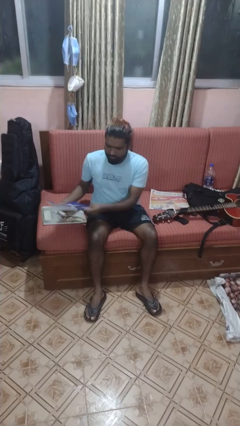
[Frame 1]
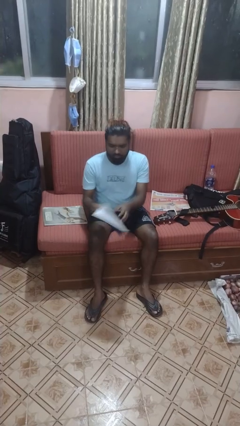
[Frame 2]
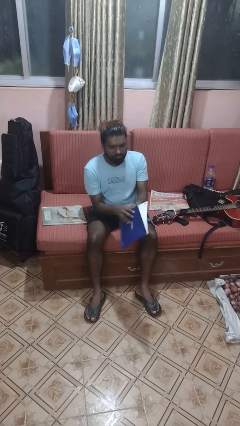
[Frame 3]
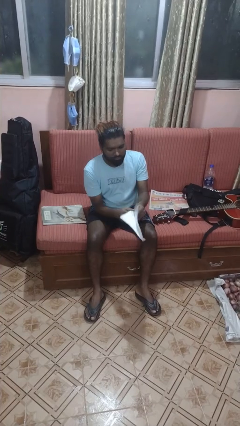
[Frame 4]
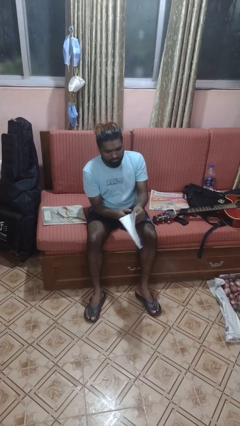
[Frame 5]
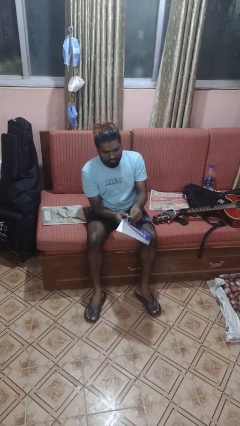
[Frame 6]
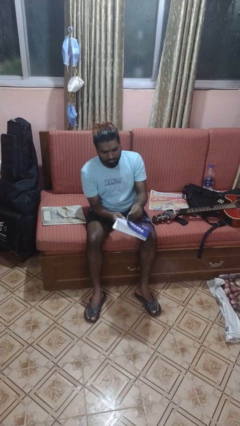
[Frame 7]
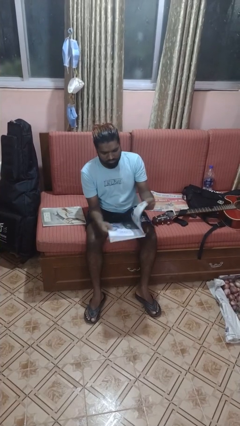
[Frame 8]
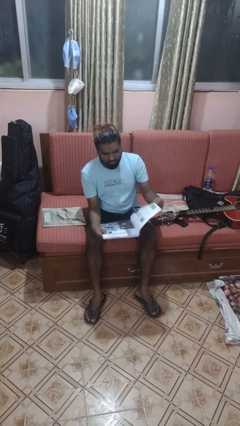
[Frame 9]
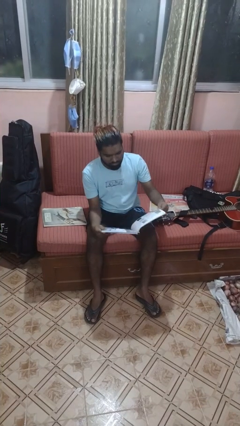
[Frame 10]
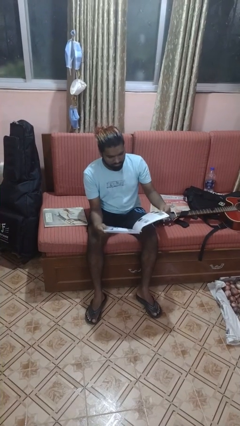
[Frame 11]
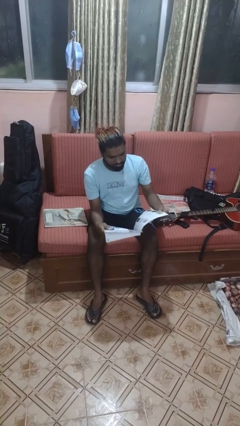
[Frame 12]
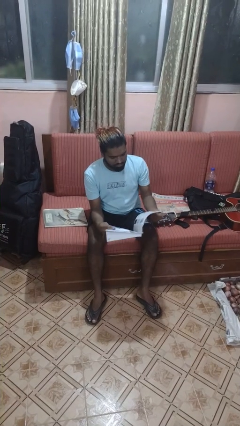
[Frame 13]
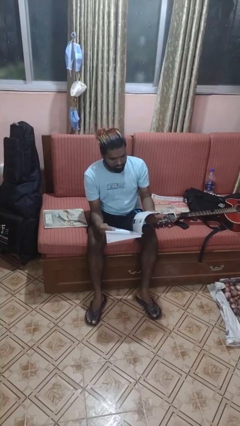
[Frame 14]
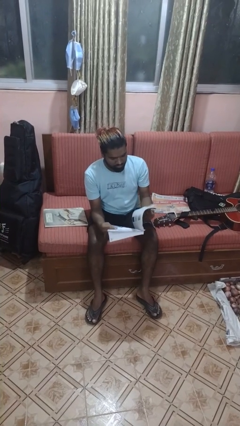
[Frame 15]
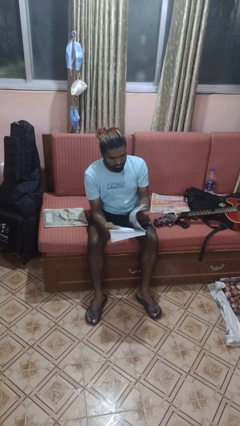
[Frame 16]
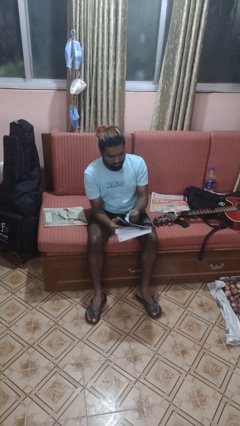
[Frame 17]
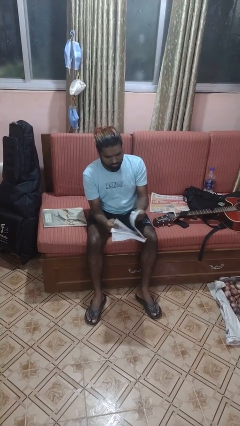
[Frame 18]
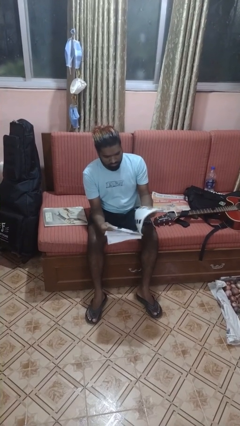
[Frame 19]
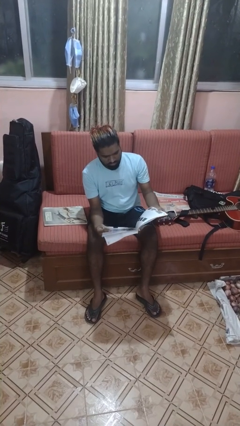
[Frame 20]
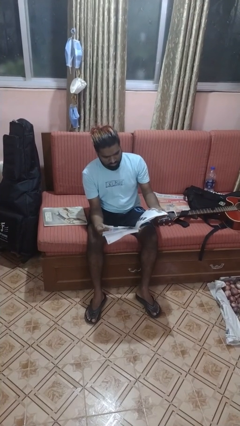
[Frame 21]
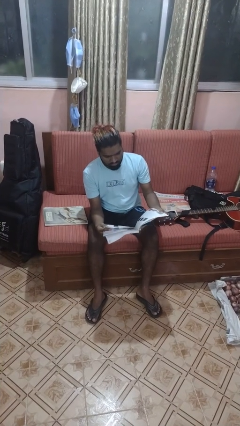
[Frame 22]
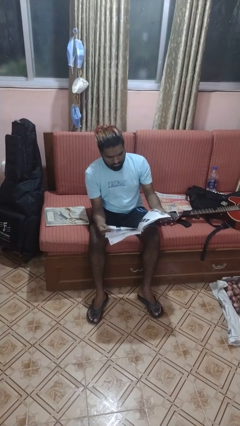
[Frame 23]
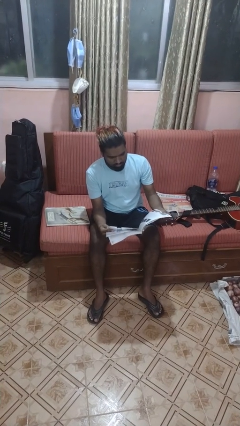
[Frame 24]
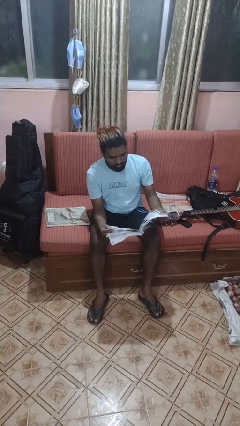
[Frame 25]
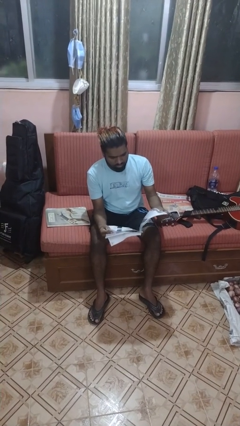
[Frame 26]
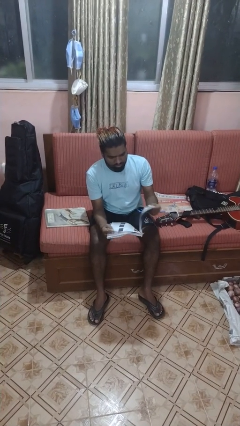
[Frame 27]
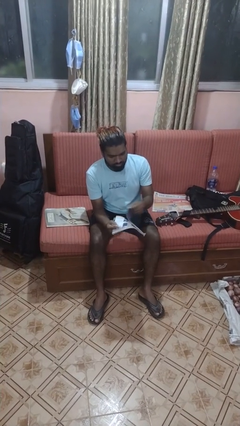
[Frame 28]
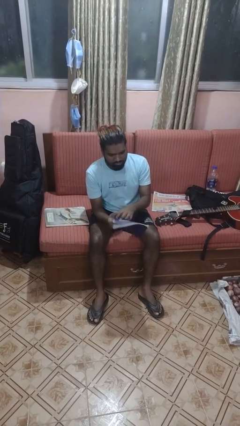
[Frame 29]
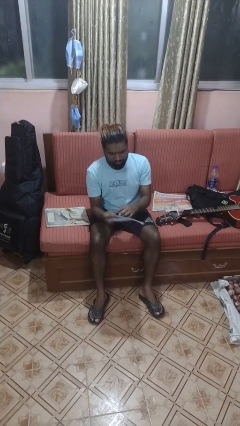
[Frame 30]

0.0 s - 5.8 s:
person reads magazine

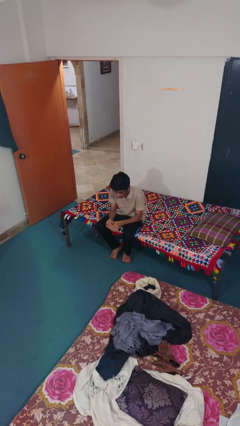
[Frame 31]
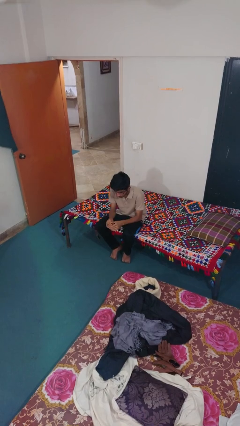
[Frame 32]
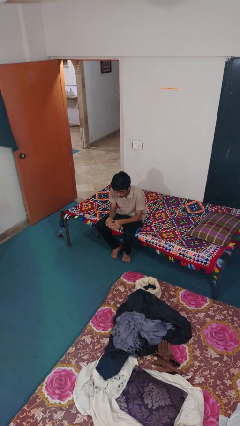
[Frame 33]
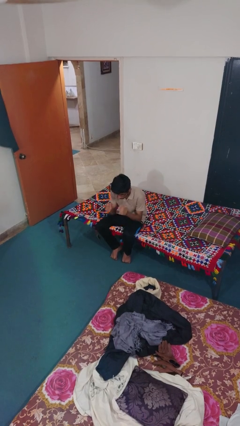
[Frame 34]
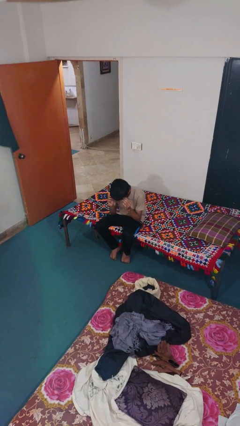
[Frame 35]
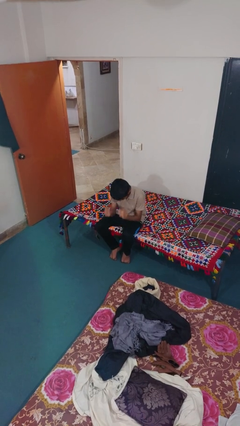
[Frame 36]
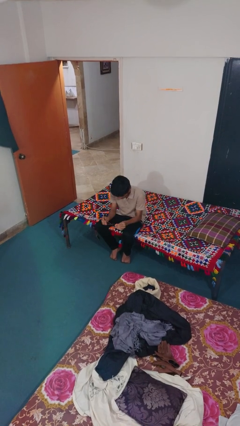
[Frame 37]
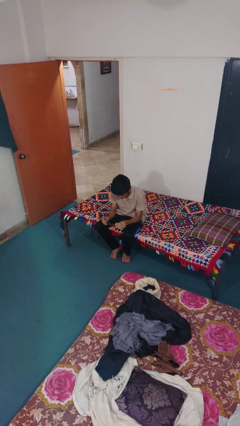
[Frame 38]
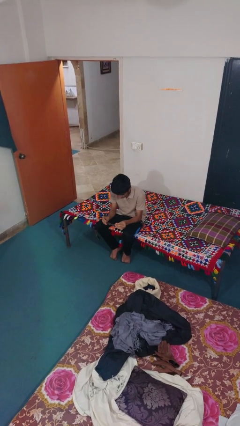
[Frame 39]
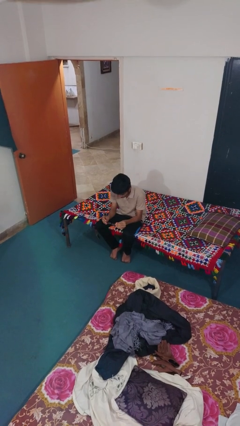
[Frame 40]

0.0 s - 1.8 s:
person takes off glasses

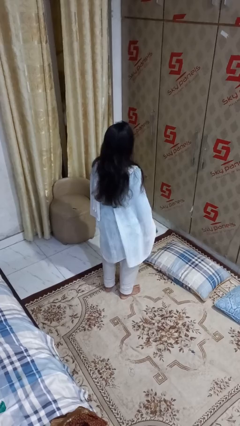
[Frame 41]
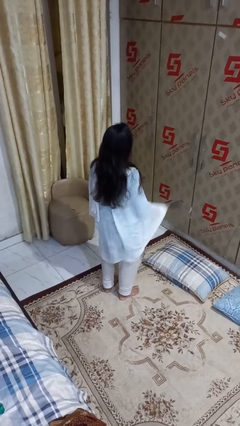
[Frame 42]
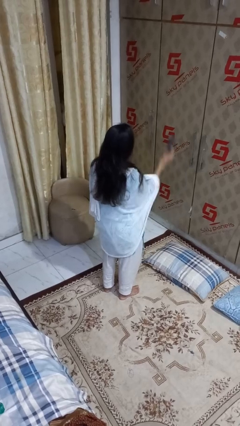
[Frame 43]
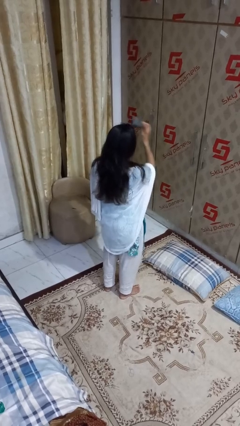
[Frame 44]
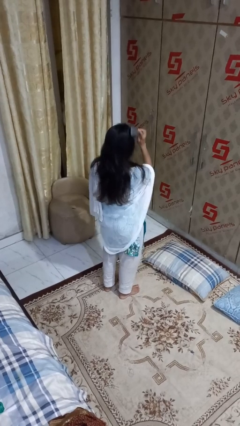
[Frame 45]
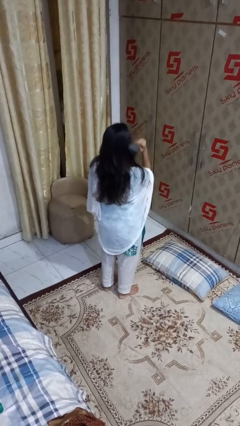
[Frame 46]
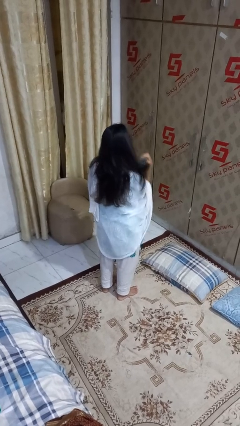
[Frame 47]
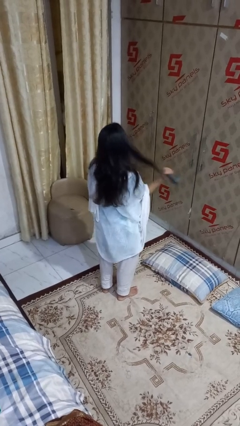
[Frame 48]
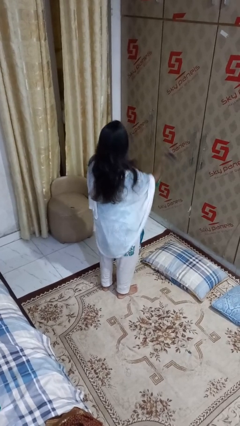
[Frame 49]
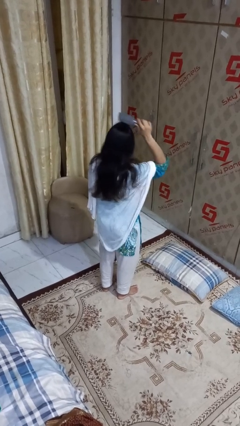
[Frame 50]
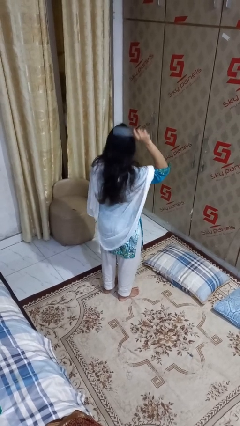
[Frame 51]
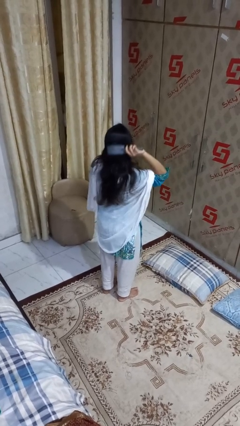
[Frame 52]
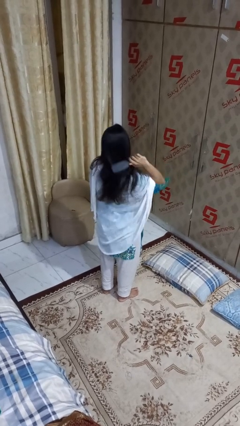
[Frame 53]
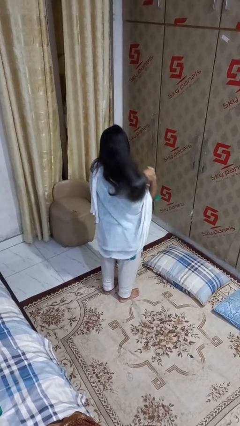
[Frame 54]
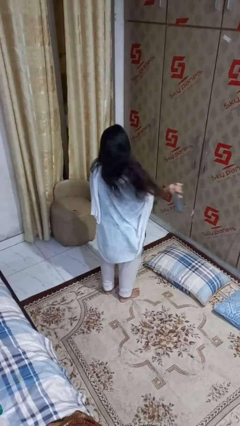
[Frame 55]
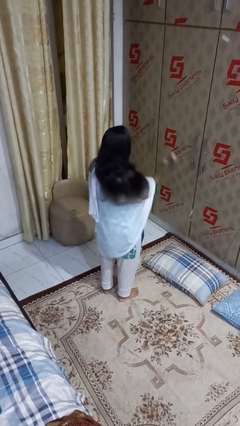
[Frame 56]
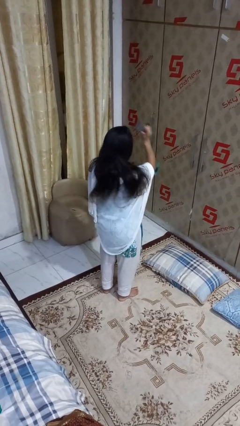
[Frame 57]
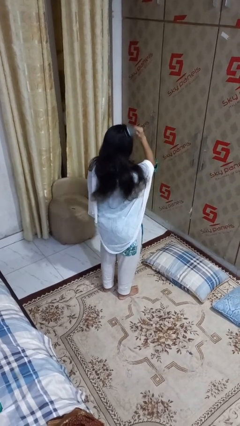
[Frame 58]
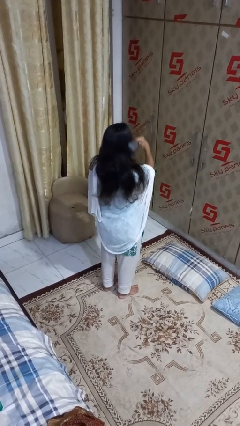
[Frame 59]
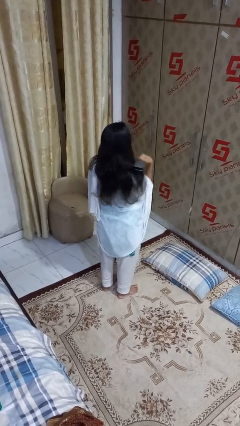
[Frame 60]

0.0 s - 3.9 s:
person brushes hair

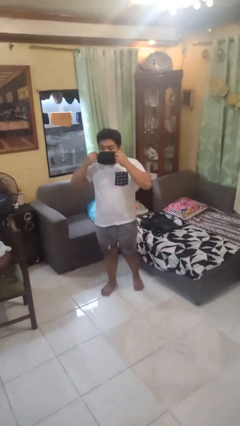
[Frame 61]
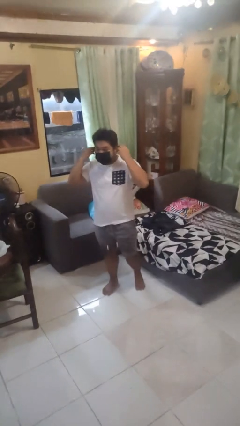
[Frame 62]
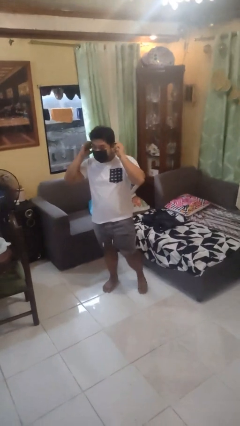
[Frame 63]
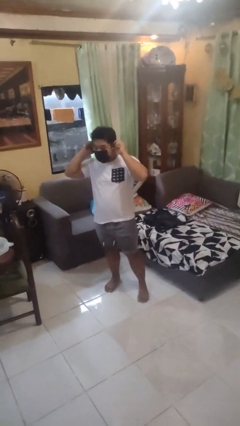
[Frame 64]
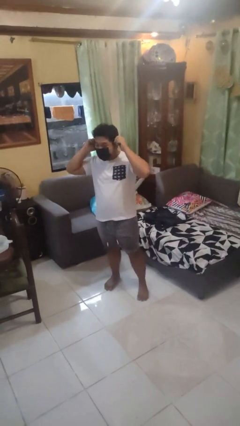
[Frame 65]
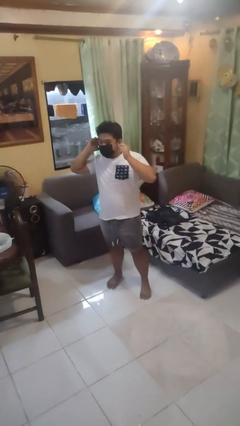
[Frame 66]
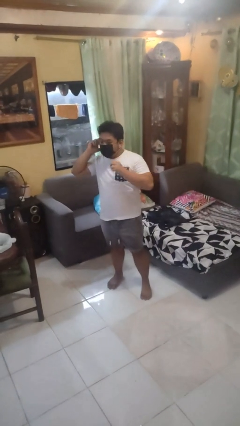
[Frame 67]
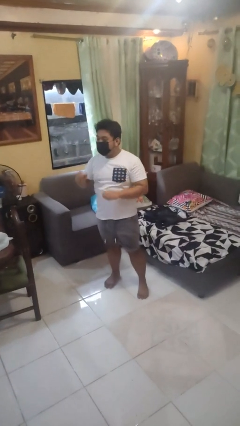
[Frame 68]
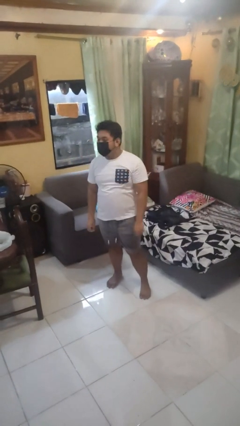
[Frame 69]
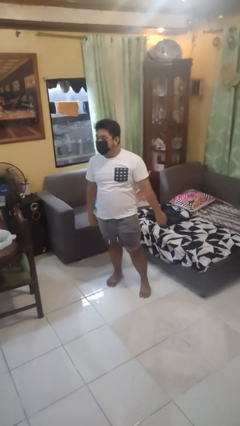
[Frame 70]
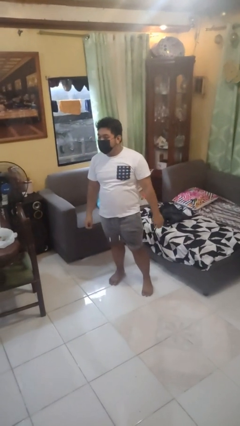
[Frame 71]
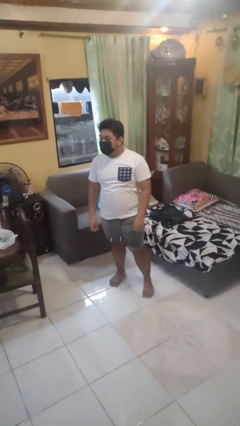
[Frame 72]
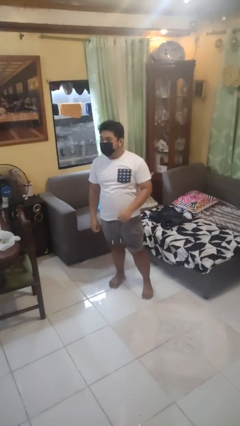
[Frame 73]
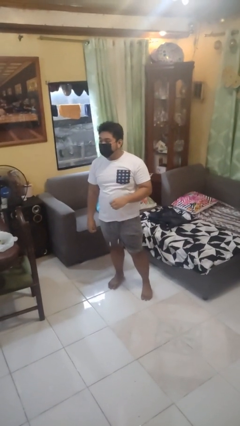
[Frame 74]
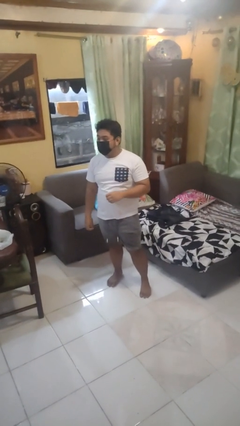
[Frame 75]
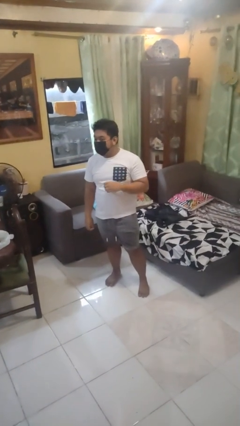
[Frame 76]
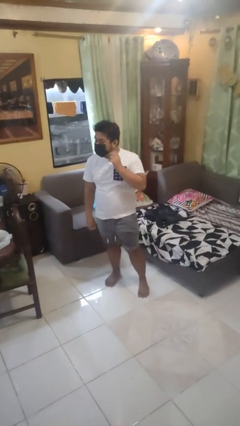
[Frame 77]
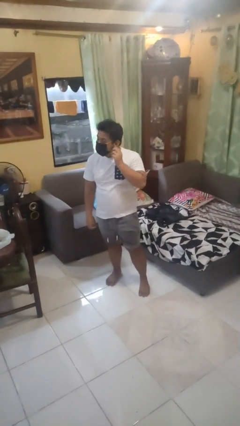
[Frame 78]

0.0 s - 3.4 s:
person puts on facemask

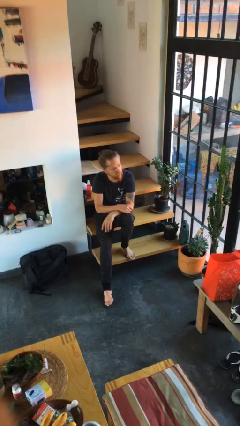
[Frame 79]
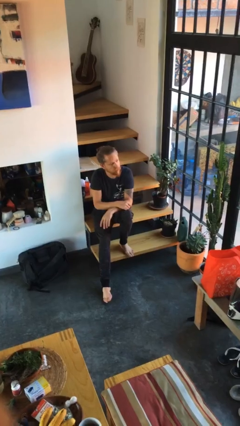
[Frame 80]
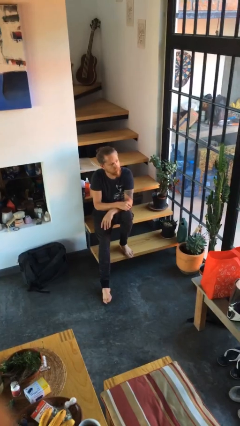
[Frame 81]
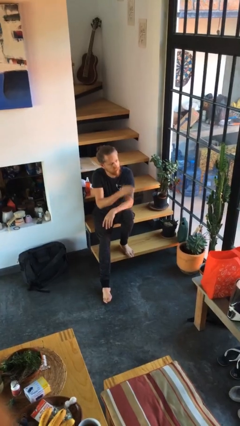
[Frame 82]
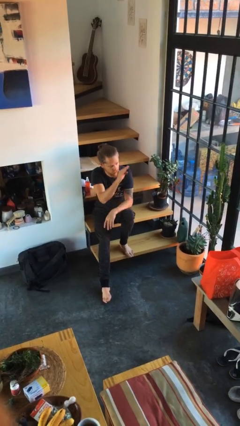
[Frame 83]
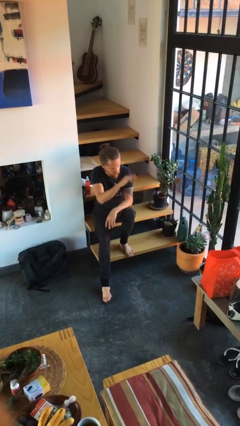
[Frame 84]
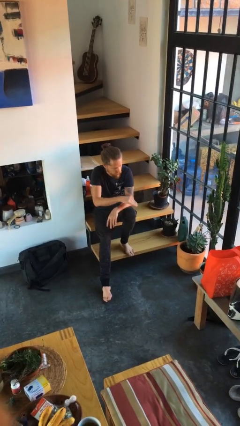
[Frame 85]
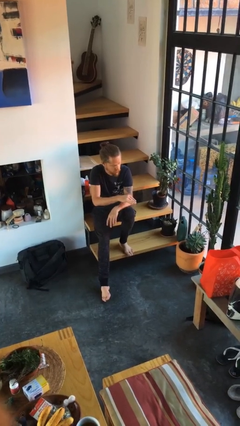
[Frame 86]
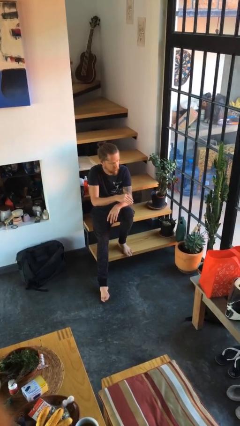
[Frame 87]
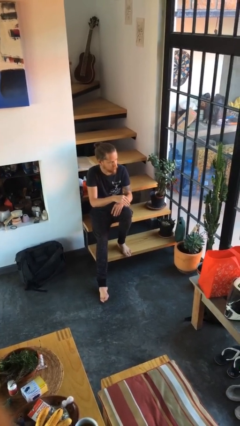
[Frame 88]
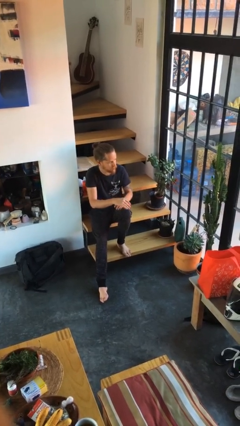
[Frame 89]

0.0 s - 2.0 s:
person gestures swipe down

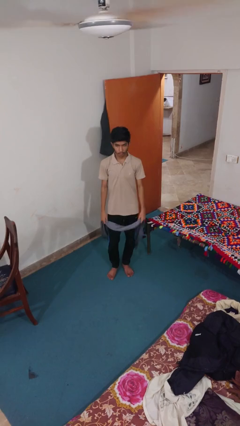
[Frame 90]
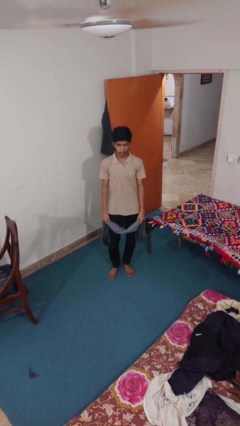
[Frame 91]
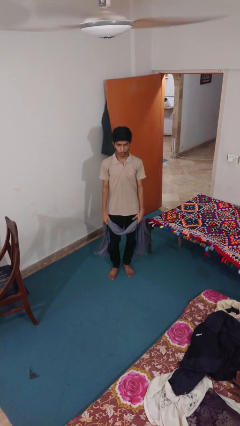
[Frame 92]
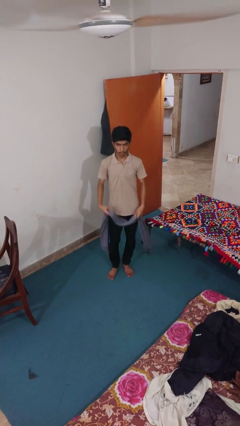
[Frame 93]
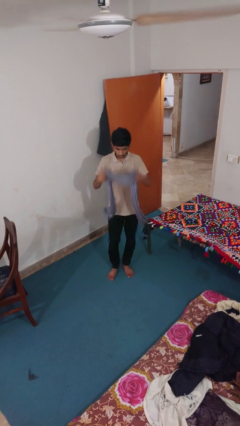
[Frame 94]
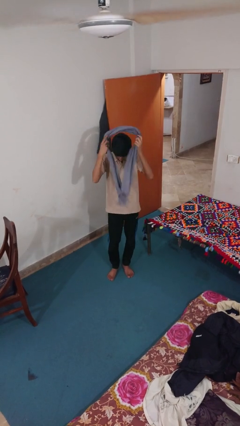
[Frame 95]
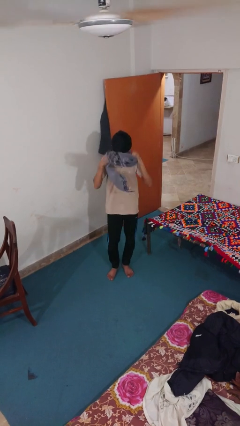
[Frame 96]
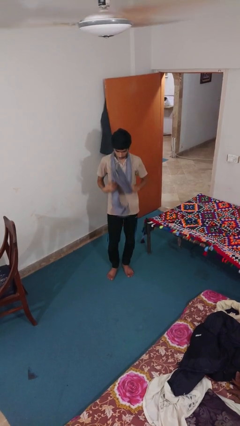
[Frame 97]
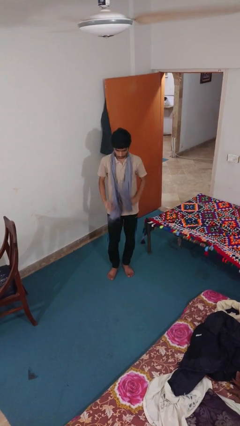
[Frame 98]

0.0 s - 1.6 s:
person puts on scarf
